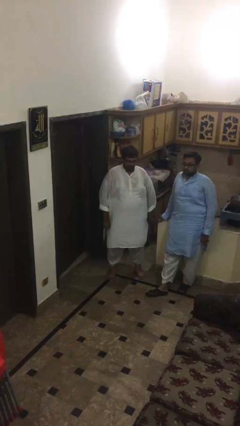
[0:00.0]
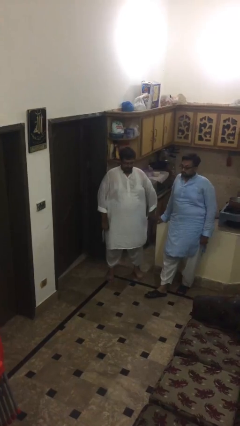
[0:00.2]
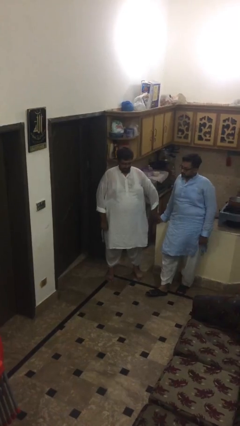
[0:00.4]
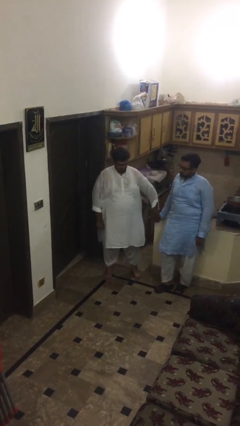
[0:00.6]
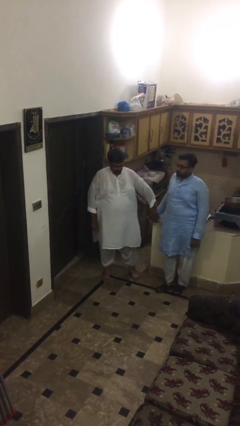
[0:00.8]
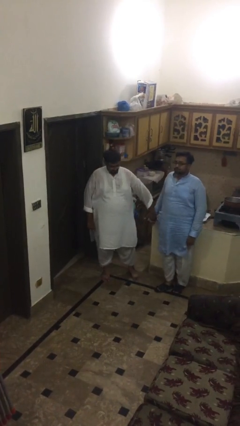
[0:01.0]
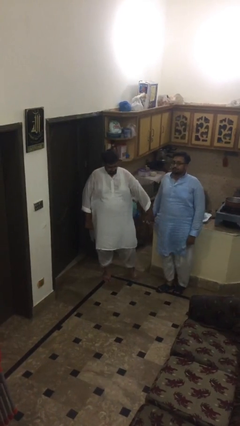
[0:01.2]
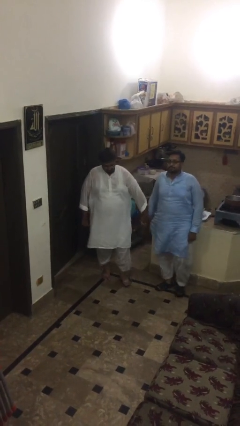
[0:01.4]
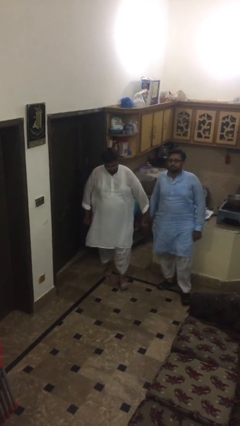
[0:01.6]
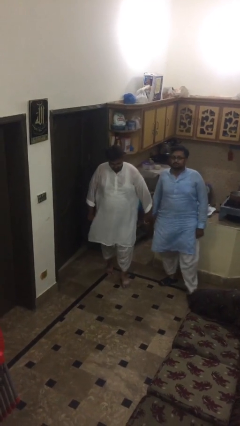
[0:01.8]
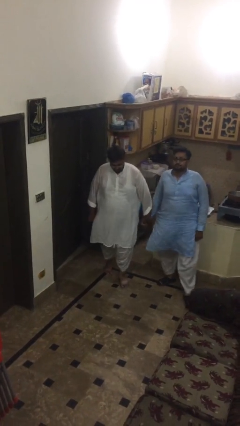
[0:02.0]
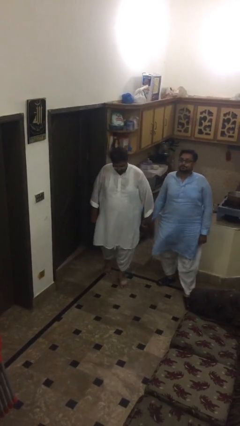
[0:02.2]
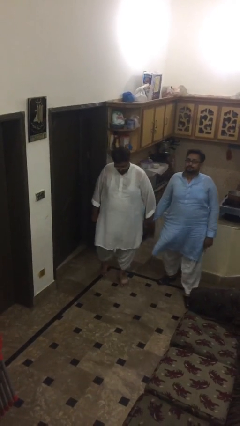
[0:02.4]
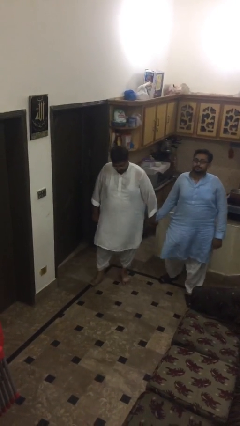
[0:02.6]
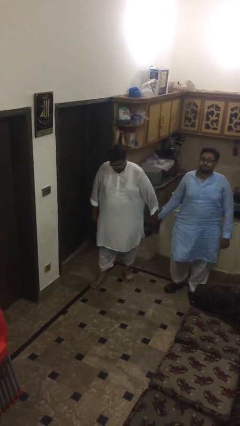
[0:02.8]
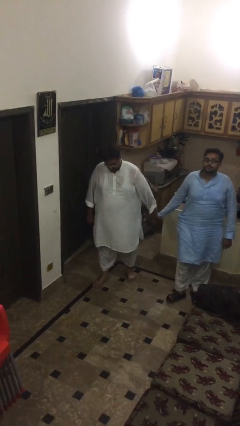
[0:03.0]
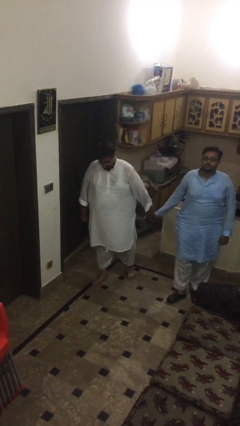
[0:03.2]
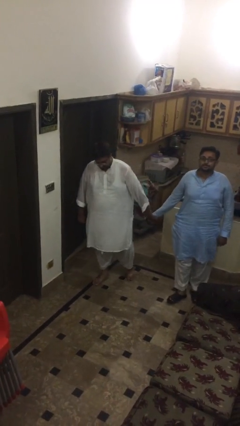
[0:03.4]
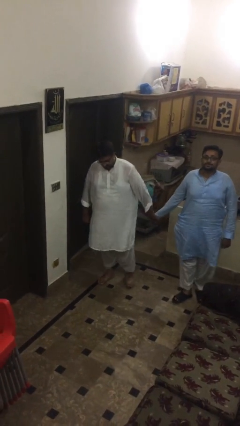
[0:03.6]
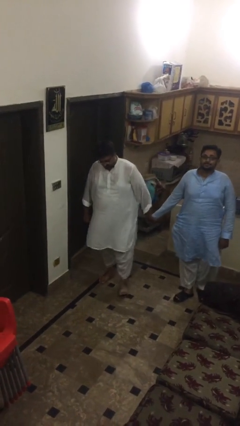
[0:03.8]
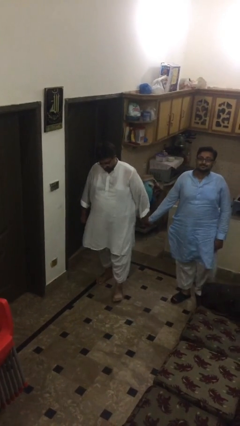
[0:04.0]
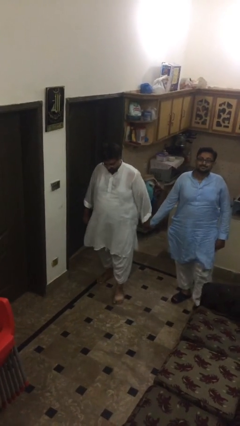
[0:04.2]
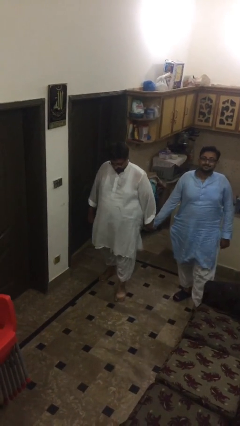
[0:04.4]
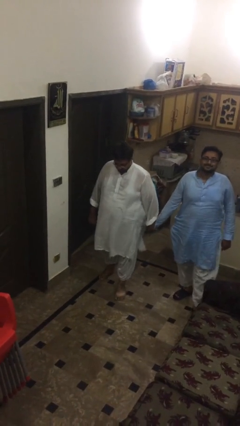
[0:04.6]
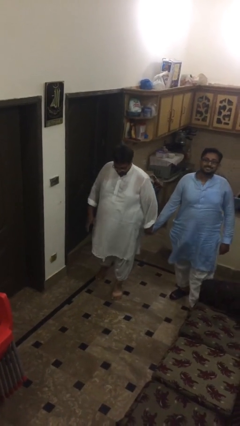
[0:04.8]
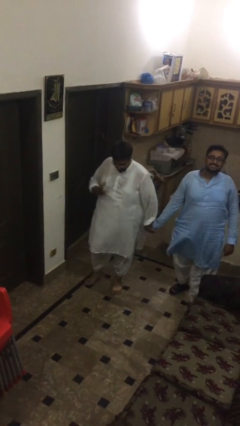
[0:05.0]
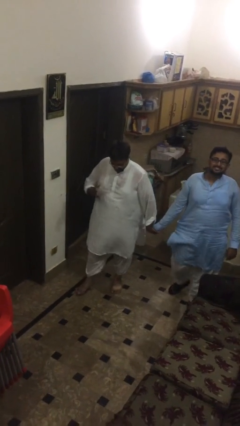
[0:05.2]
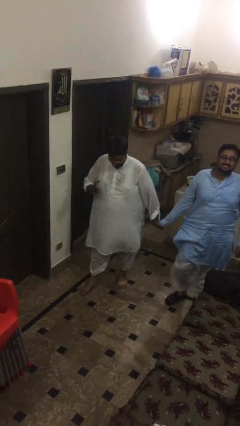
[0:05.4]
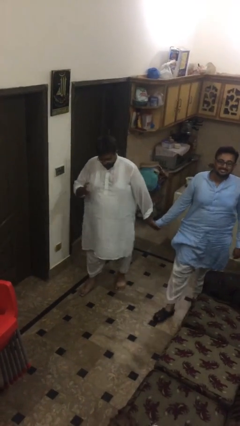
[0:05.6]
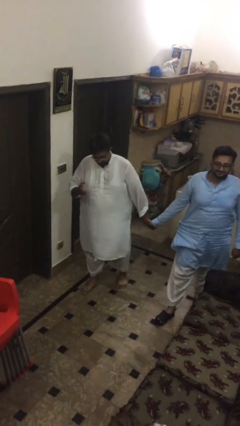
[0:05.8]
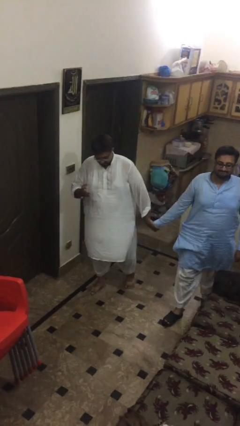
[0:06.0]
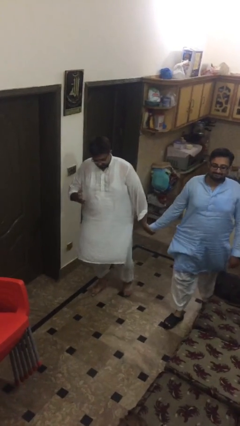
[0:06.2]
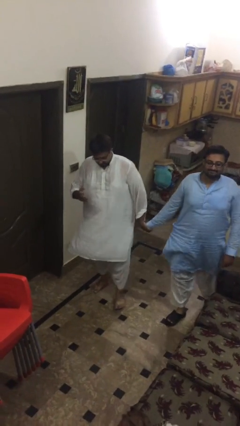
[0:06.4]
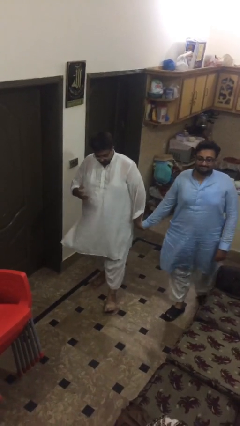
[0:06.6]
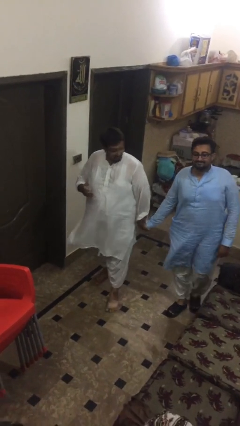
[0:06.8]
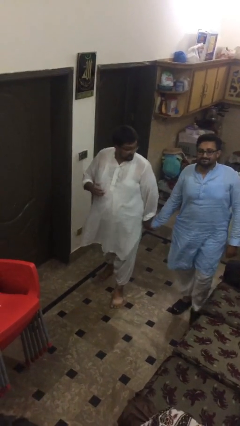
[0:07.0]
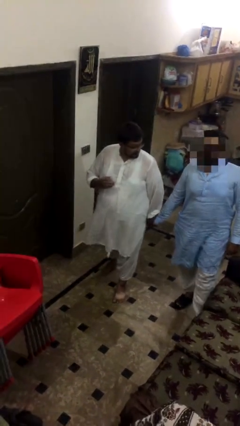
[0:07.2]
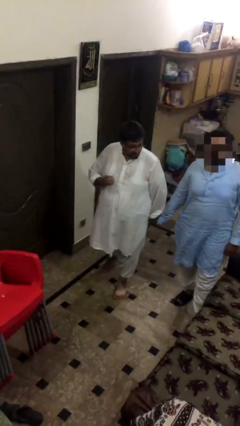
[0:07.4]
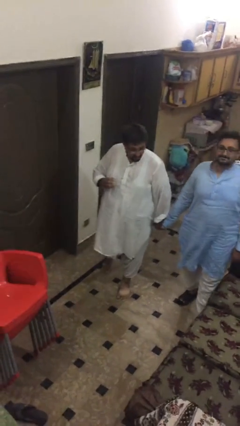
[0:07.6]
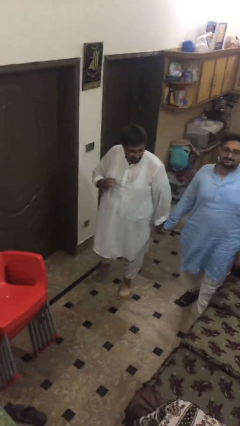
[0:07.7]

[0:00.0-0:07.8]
person holds hand

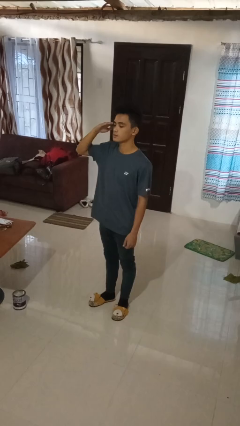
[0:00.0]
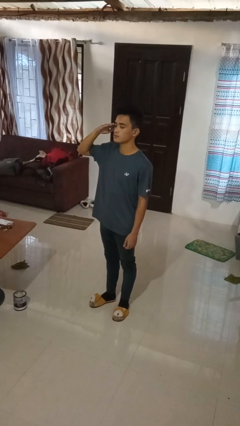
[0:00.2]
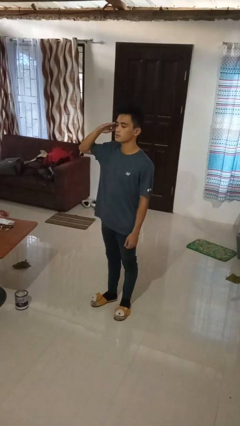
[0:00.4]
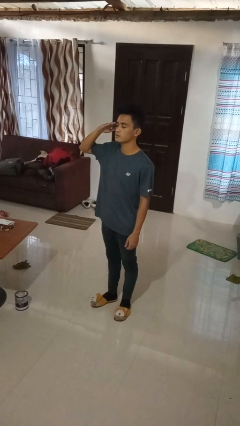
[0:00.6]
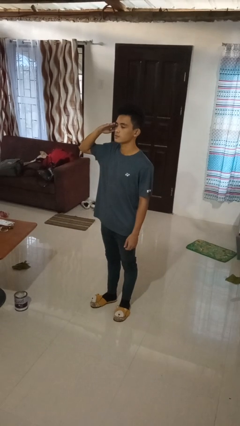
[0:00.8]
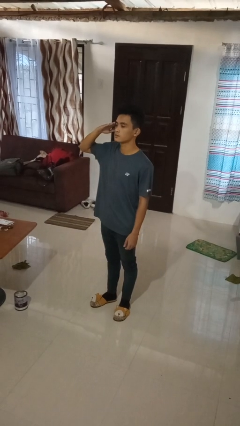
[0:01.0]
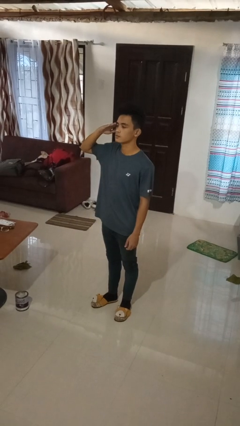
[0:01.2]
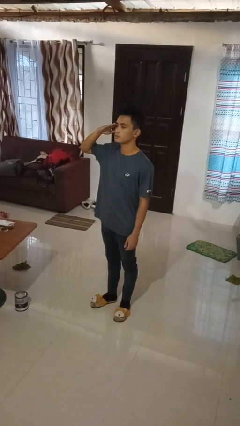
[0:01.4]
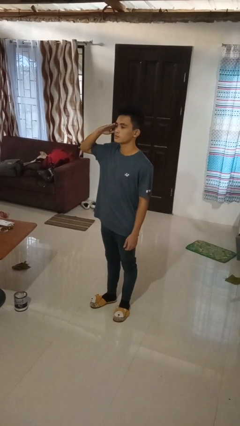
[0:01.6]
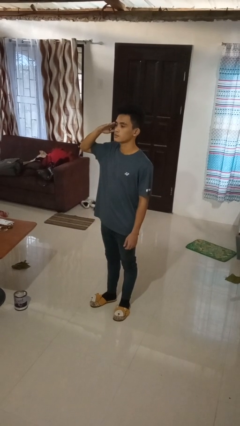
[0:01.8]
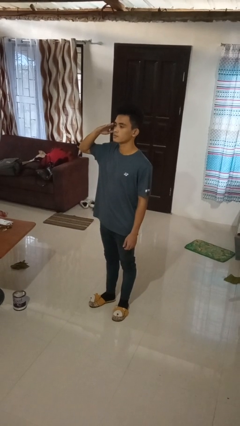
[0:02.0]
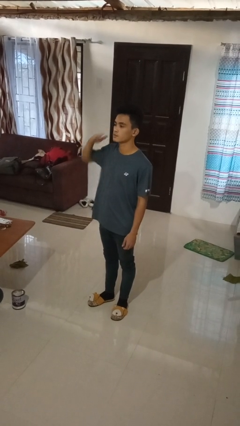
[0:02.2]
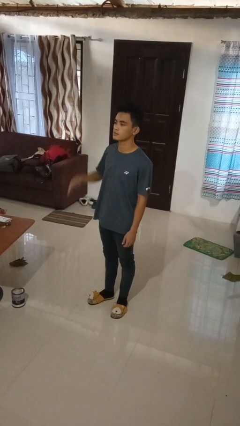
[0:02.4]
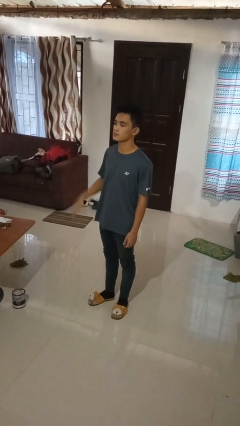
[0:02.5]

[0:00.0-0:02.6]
person salutes

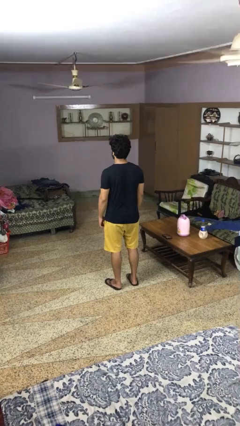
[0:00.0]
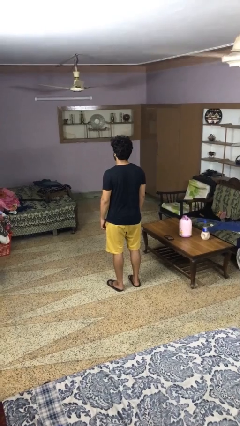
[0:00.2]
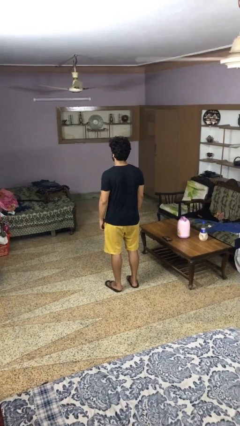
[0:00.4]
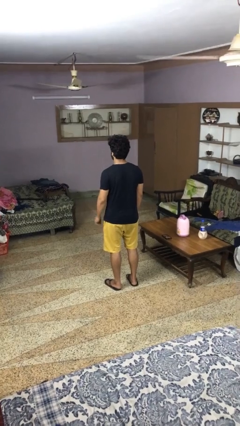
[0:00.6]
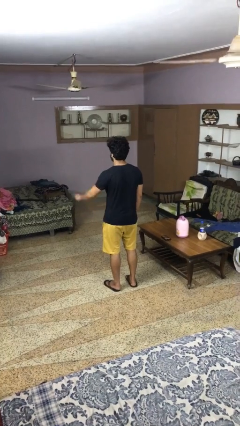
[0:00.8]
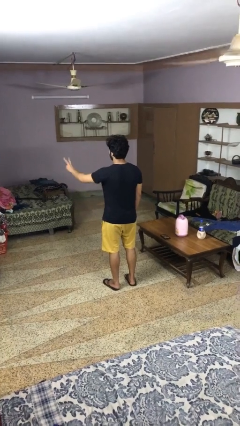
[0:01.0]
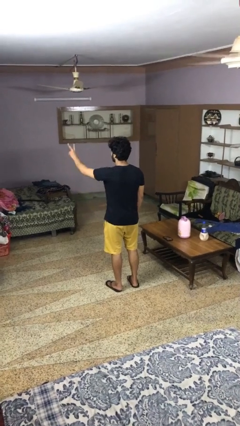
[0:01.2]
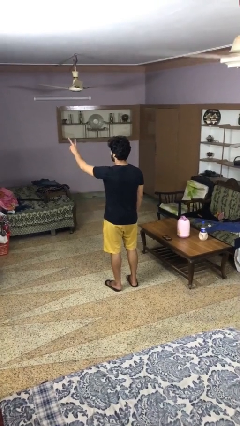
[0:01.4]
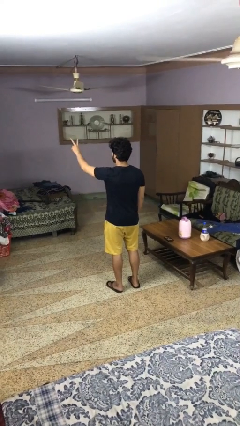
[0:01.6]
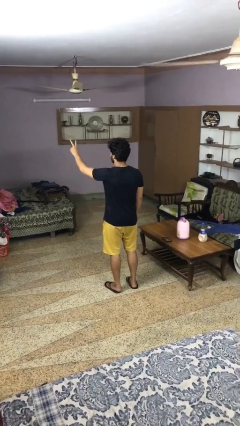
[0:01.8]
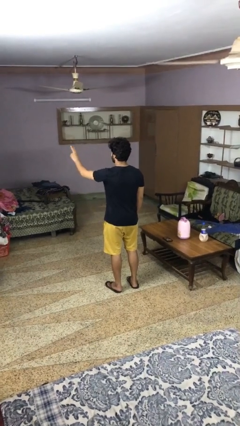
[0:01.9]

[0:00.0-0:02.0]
person gestures peace

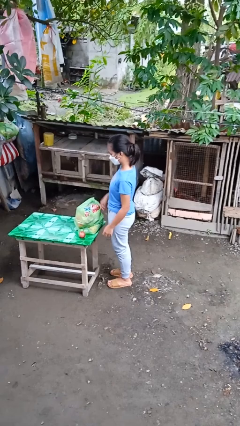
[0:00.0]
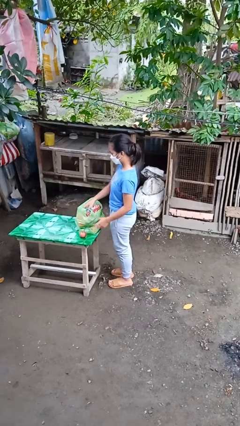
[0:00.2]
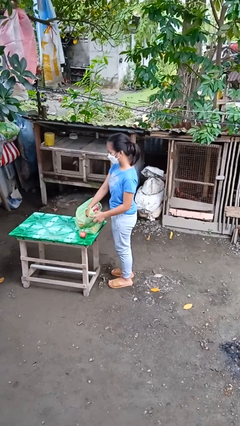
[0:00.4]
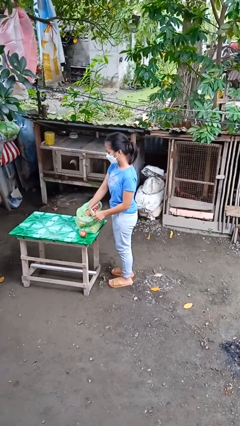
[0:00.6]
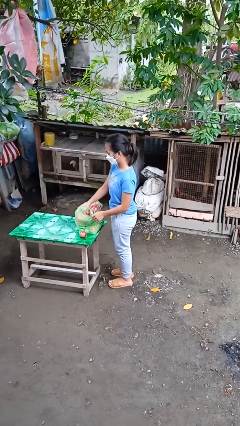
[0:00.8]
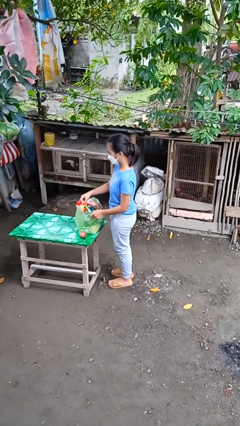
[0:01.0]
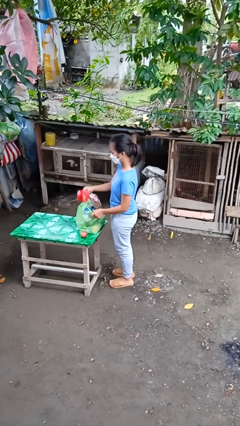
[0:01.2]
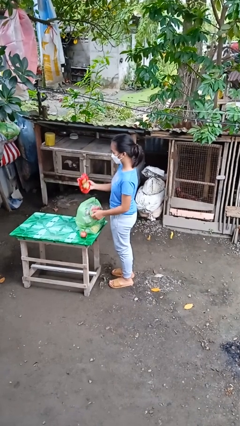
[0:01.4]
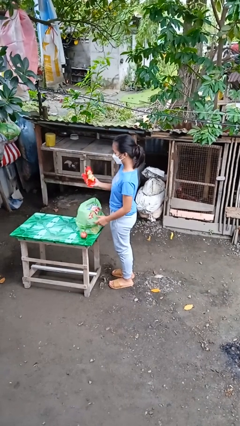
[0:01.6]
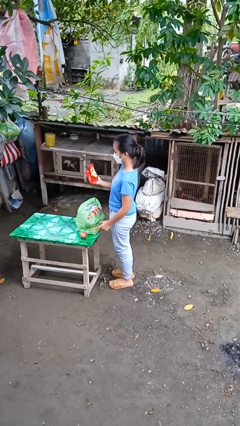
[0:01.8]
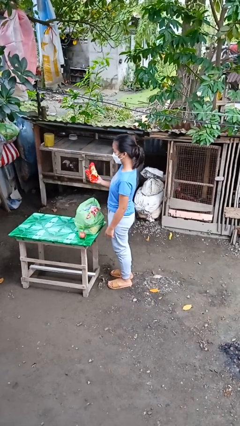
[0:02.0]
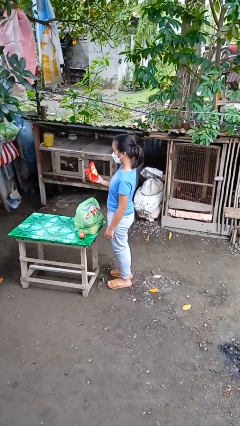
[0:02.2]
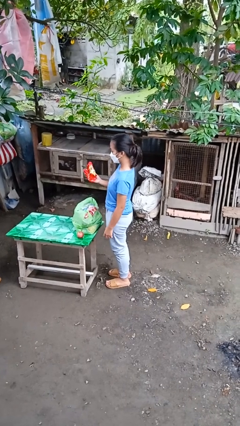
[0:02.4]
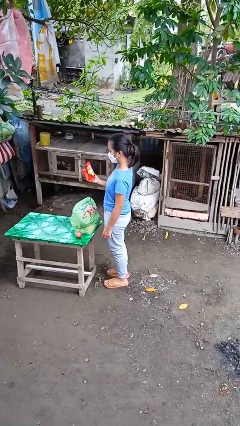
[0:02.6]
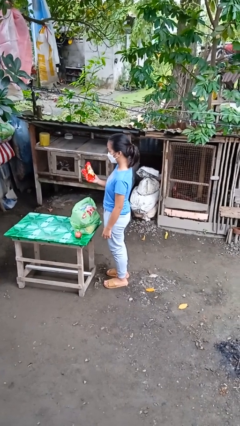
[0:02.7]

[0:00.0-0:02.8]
person takes object from bag

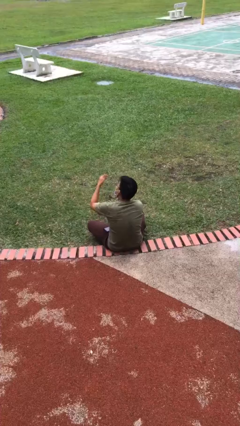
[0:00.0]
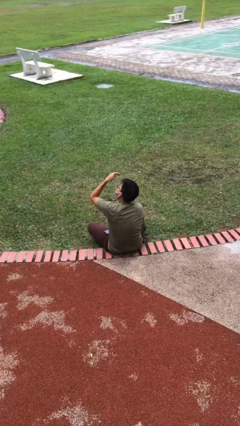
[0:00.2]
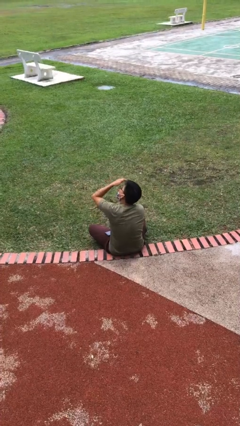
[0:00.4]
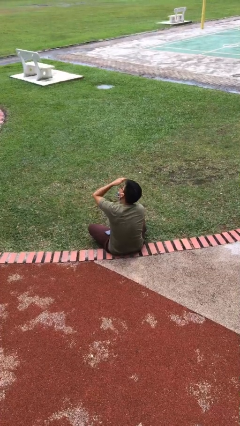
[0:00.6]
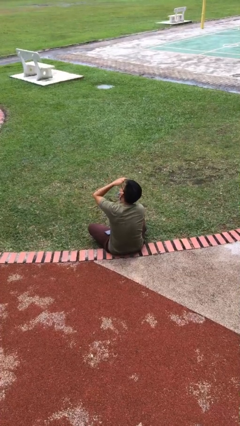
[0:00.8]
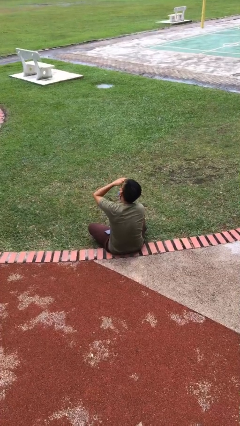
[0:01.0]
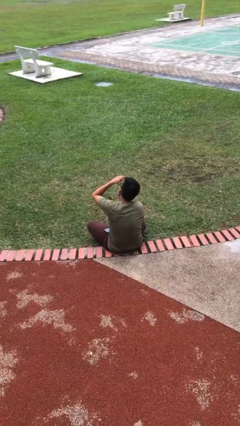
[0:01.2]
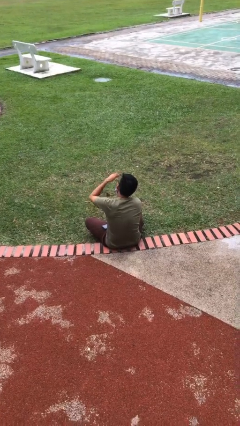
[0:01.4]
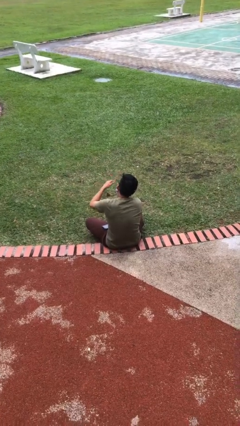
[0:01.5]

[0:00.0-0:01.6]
person shades eyes

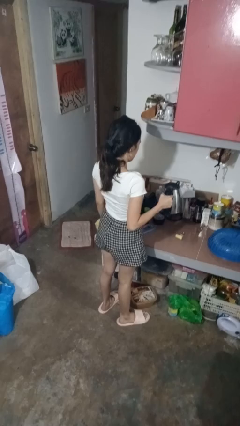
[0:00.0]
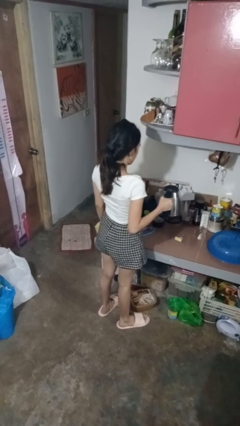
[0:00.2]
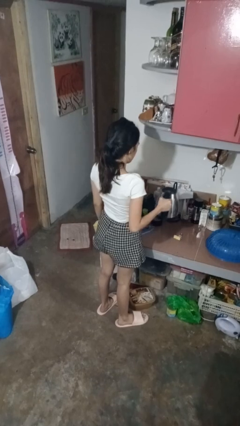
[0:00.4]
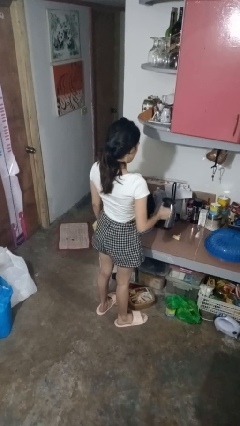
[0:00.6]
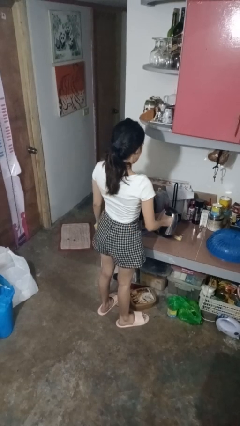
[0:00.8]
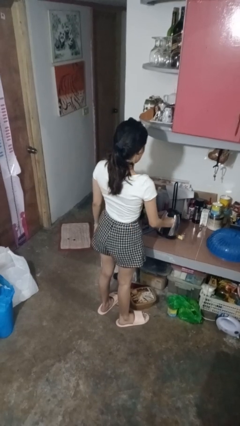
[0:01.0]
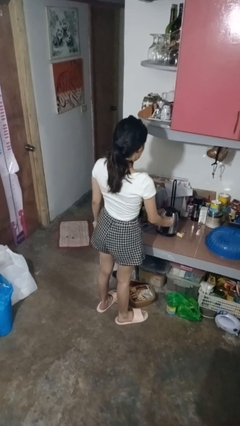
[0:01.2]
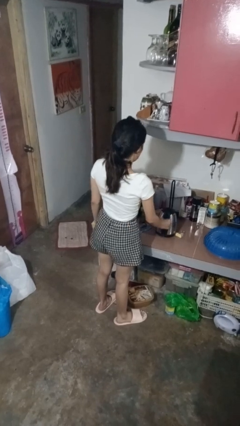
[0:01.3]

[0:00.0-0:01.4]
person puts down object on countertop
